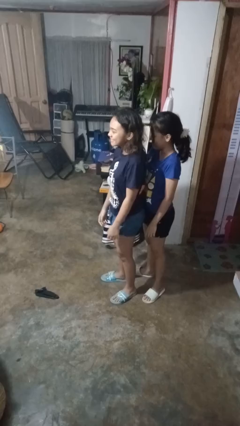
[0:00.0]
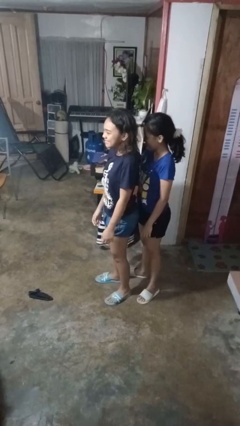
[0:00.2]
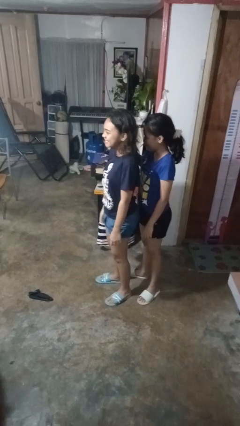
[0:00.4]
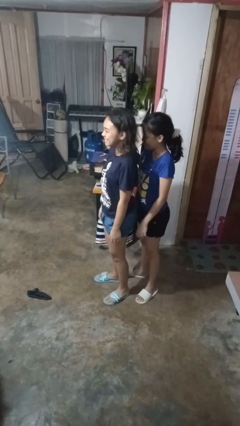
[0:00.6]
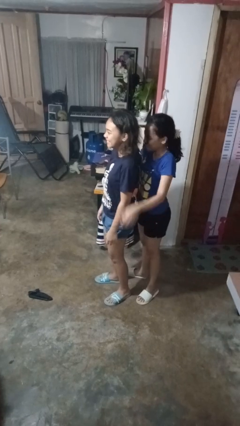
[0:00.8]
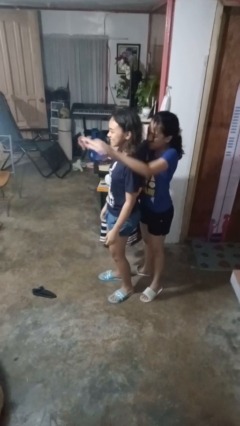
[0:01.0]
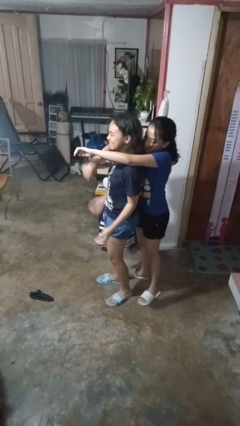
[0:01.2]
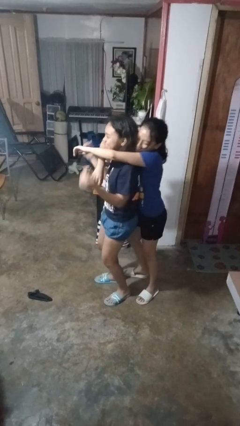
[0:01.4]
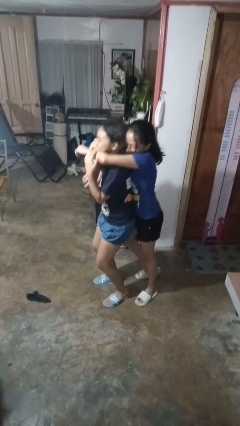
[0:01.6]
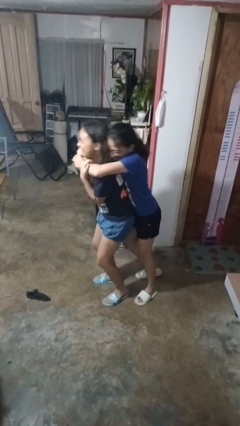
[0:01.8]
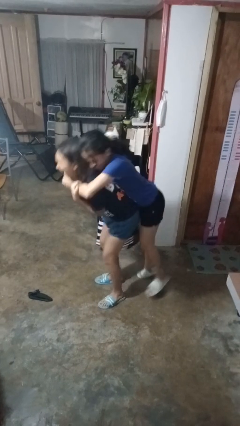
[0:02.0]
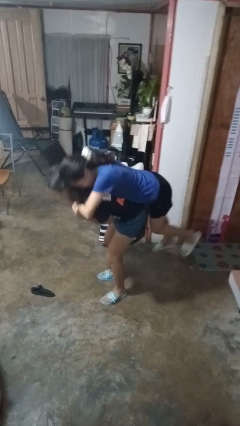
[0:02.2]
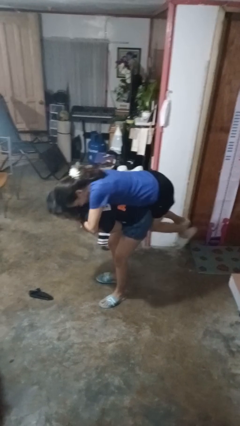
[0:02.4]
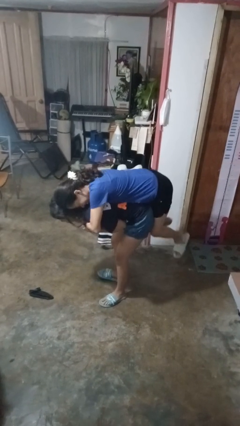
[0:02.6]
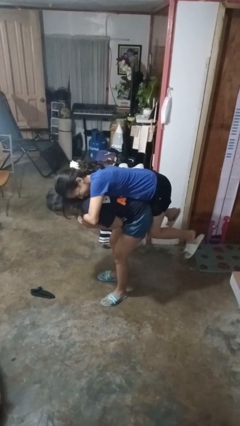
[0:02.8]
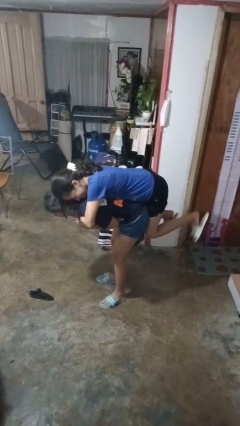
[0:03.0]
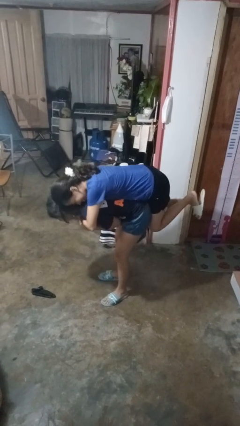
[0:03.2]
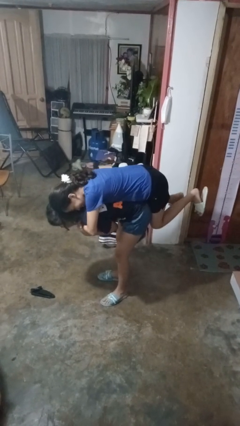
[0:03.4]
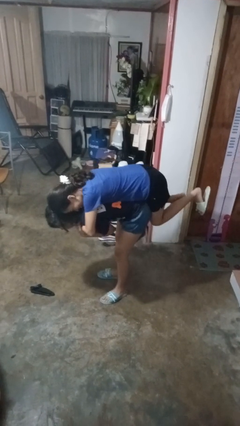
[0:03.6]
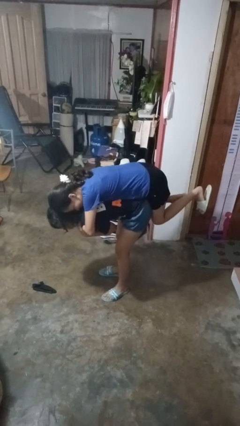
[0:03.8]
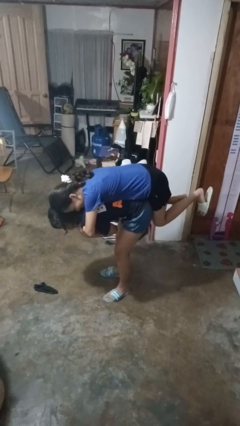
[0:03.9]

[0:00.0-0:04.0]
person picks up person

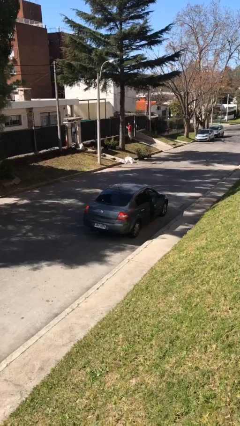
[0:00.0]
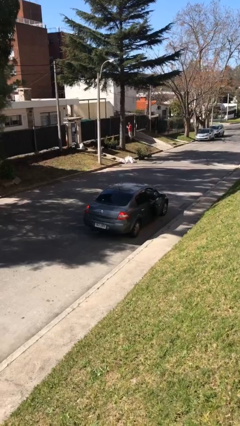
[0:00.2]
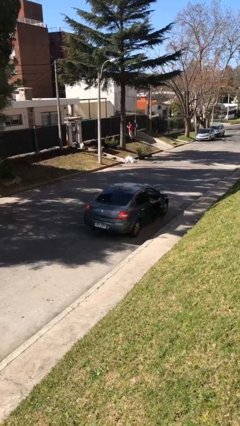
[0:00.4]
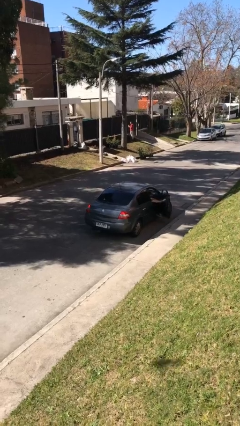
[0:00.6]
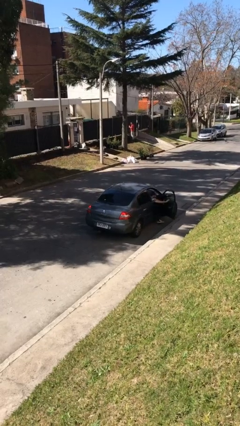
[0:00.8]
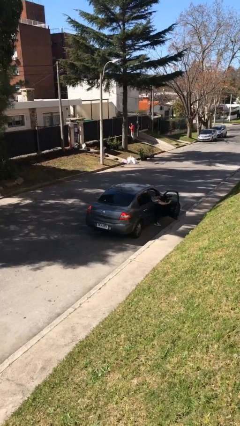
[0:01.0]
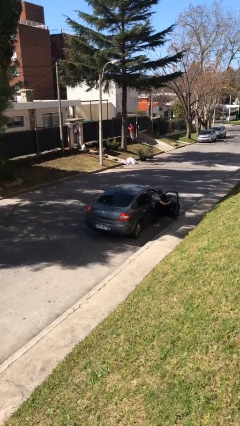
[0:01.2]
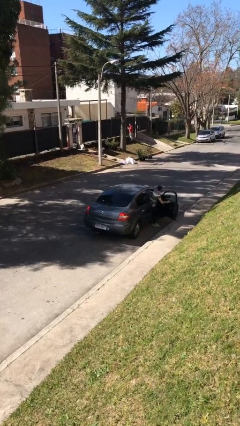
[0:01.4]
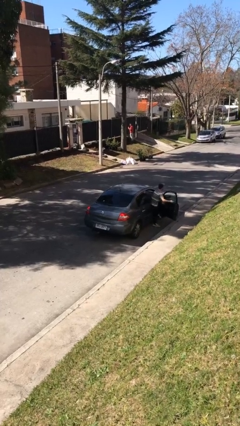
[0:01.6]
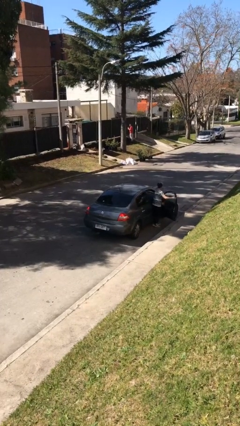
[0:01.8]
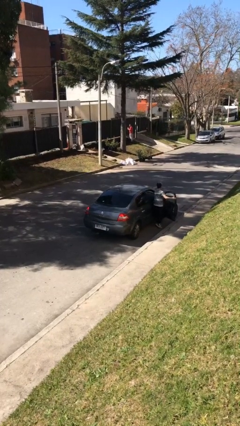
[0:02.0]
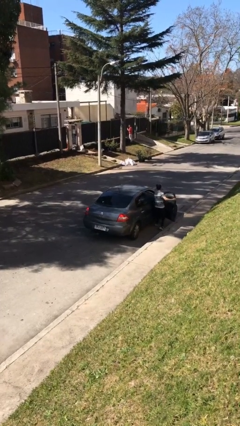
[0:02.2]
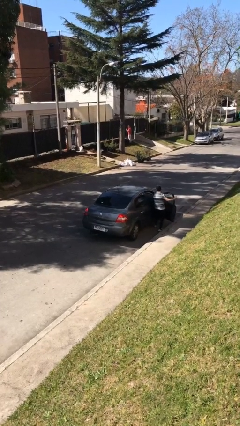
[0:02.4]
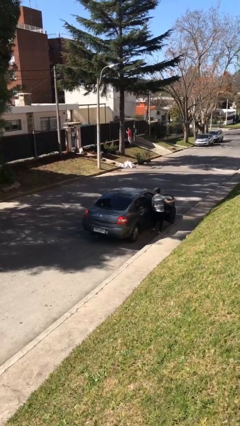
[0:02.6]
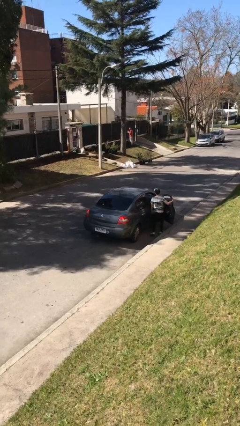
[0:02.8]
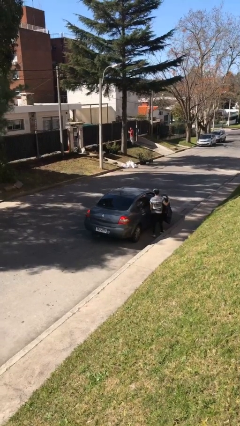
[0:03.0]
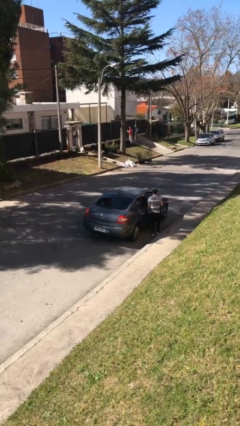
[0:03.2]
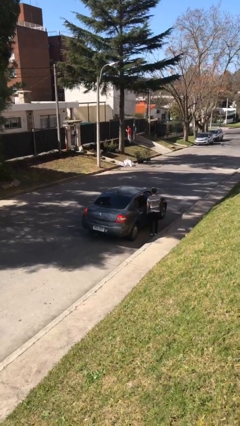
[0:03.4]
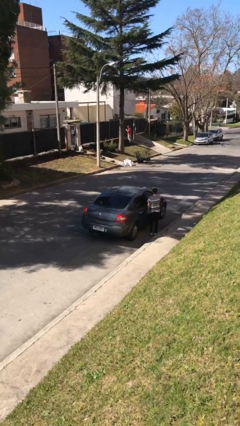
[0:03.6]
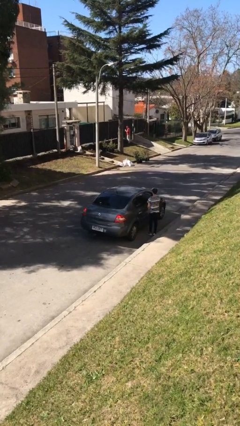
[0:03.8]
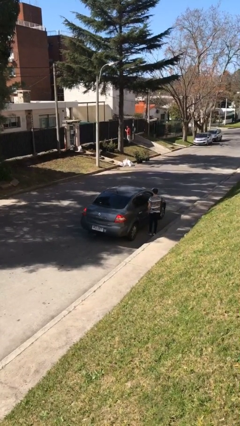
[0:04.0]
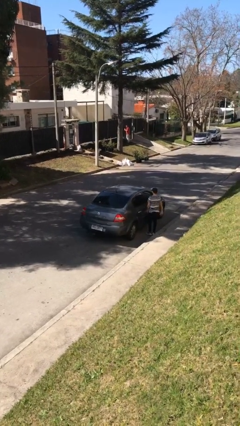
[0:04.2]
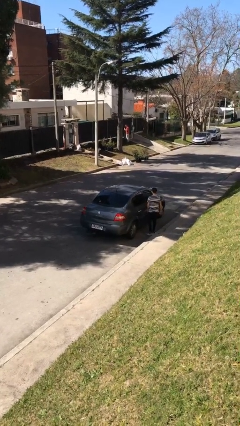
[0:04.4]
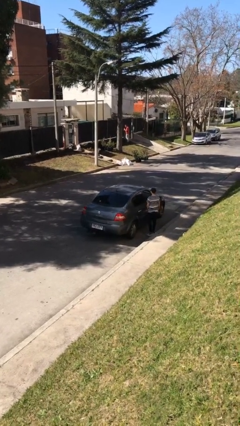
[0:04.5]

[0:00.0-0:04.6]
car drops off person

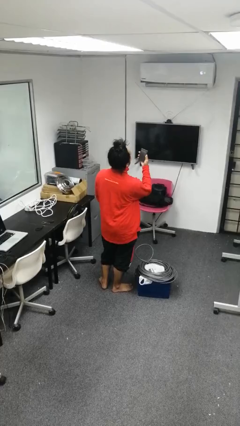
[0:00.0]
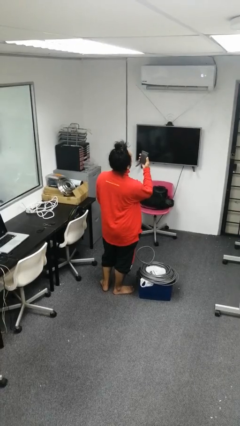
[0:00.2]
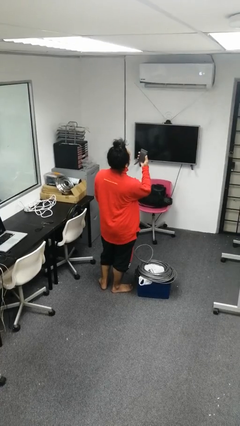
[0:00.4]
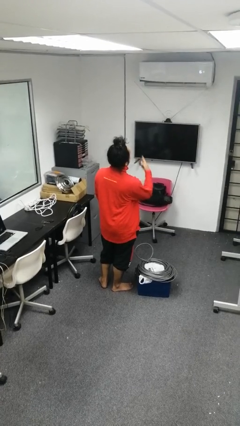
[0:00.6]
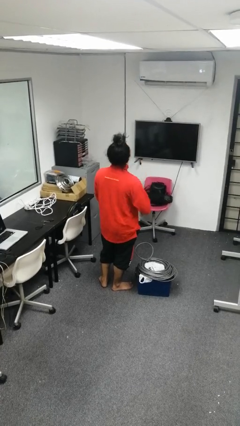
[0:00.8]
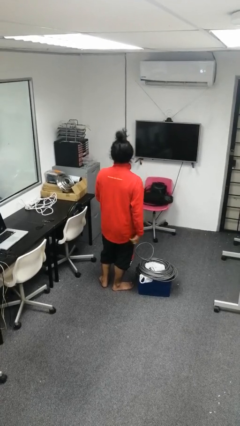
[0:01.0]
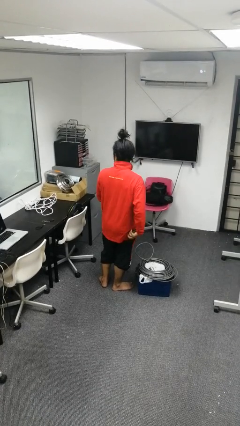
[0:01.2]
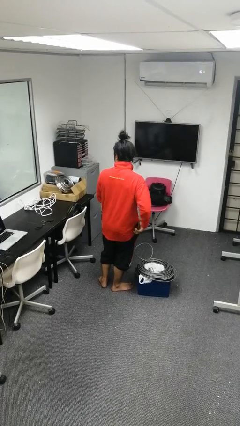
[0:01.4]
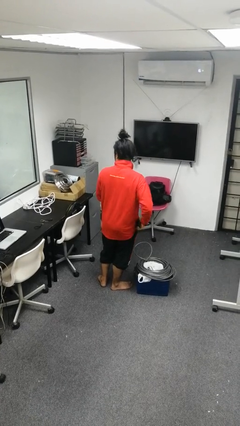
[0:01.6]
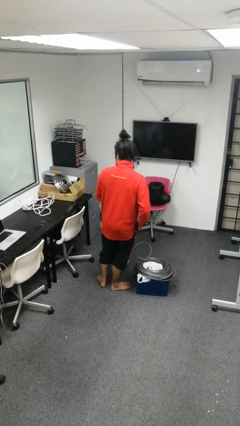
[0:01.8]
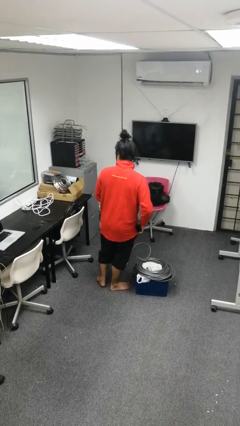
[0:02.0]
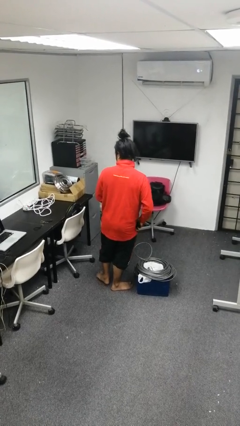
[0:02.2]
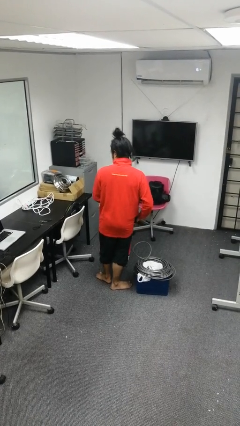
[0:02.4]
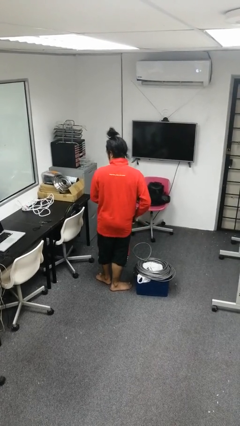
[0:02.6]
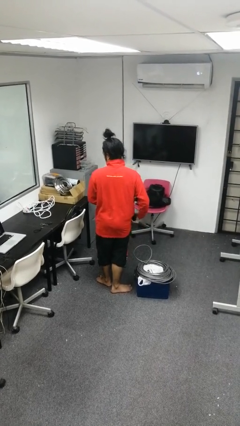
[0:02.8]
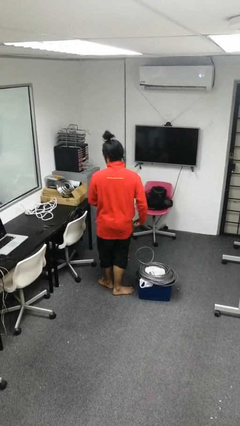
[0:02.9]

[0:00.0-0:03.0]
person puts phone into pocket

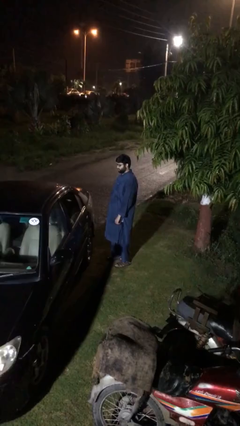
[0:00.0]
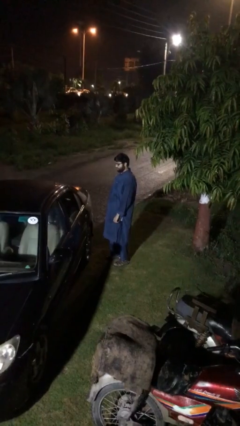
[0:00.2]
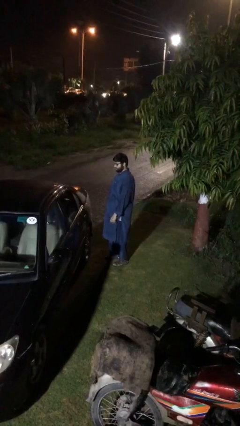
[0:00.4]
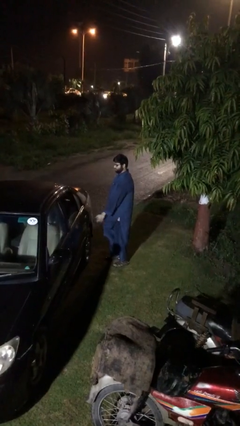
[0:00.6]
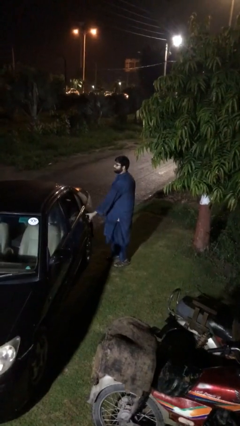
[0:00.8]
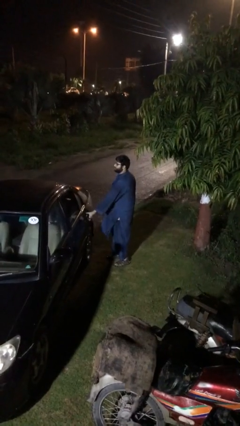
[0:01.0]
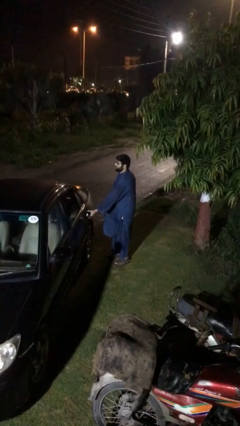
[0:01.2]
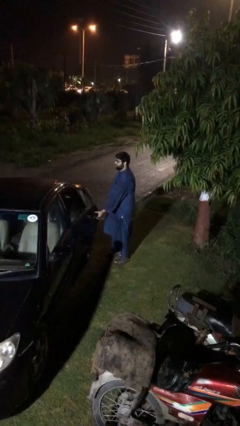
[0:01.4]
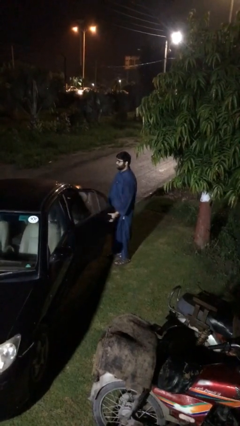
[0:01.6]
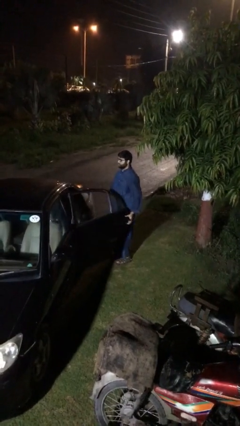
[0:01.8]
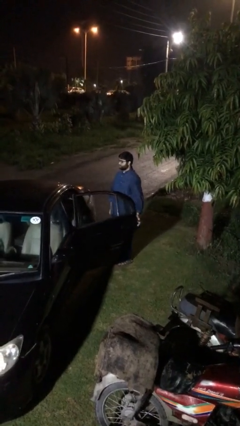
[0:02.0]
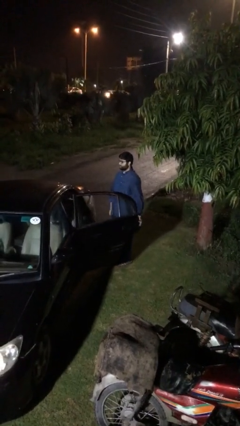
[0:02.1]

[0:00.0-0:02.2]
person opens car door

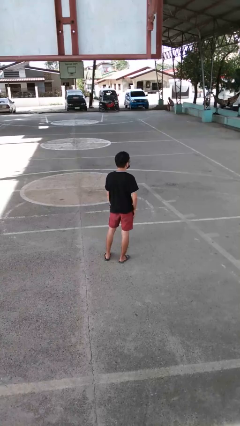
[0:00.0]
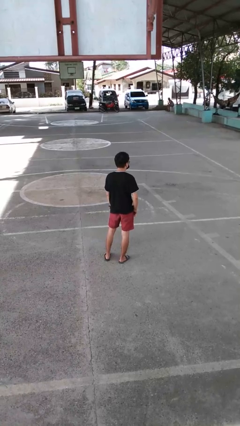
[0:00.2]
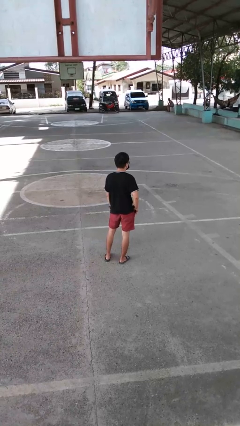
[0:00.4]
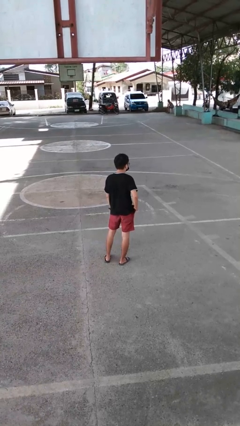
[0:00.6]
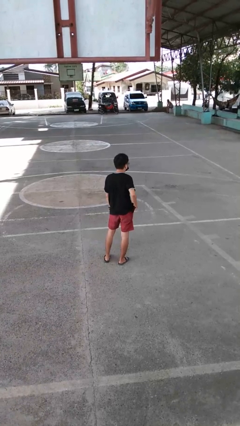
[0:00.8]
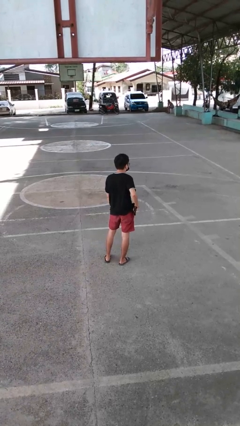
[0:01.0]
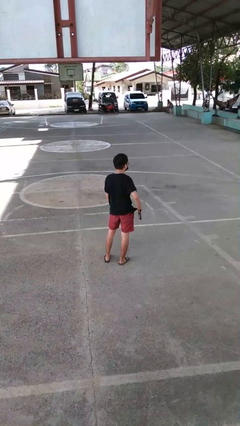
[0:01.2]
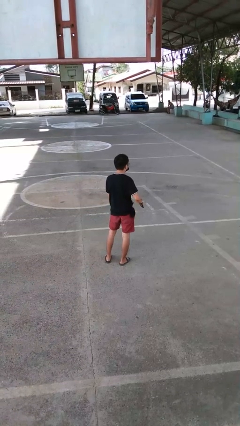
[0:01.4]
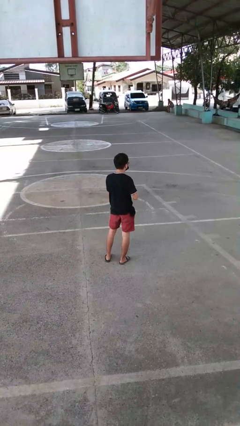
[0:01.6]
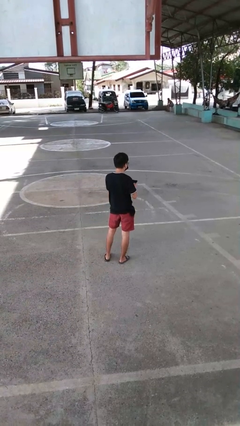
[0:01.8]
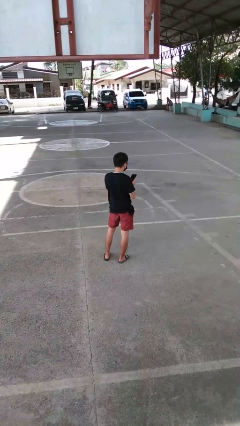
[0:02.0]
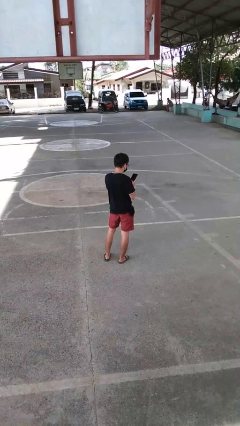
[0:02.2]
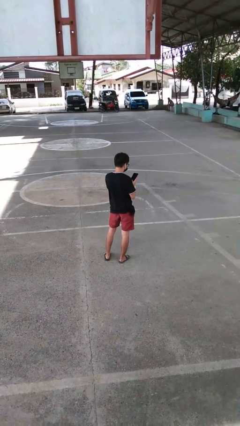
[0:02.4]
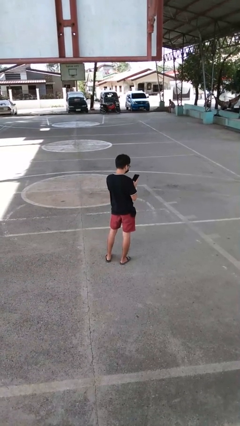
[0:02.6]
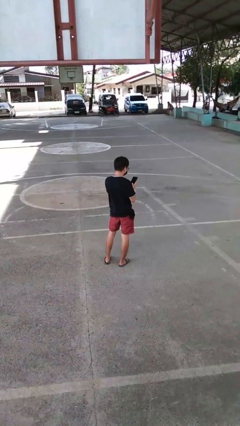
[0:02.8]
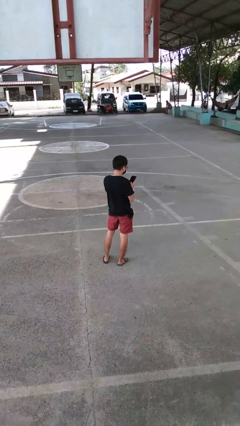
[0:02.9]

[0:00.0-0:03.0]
person takes phone from pocket

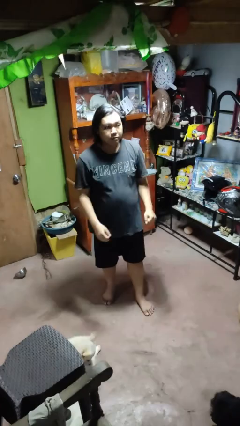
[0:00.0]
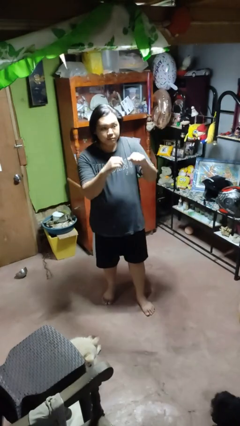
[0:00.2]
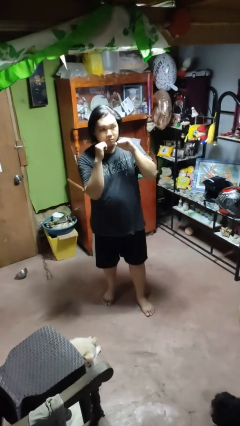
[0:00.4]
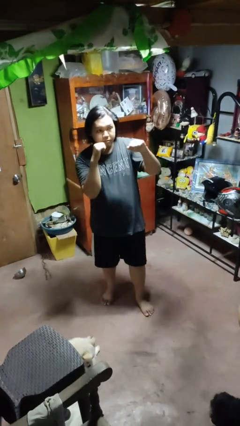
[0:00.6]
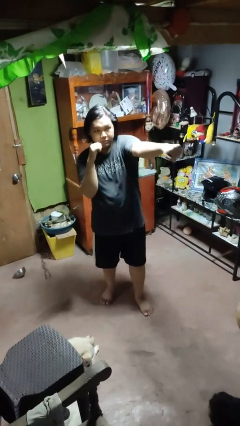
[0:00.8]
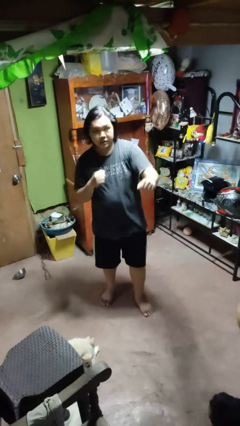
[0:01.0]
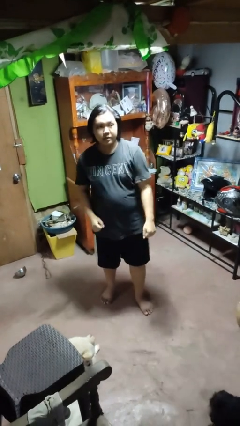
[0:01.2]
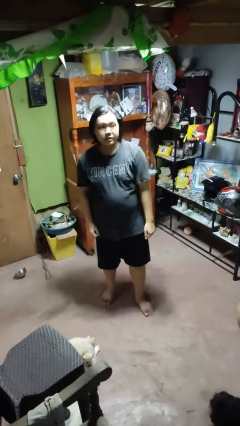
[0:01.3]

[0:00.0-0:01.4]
person punches
